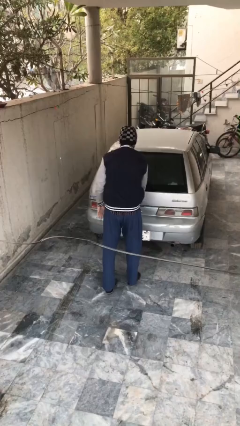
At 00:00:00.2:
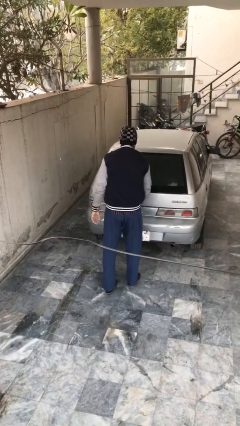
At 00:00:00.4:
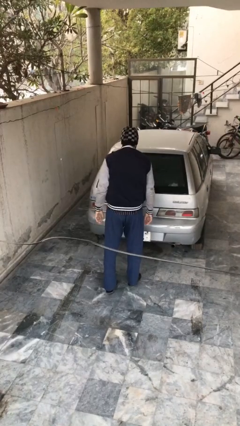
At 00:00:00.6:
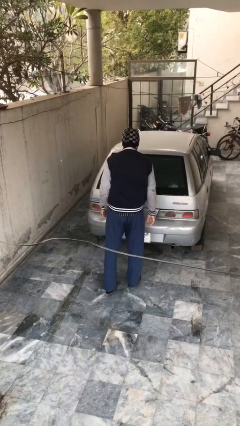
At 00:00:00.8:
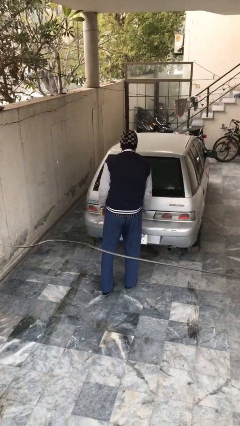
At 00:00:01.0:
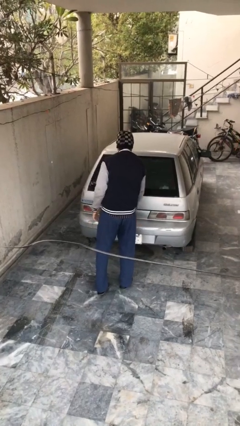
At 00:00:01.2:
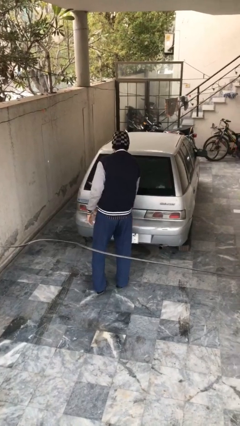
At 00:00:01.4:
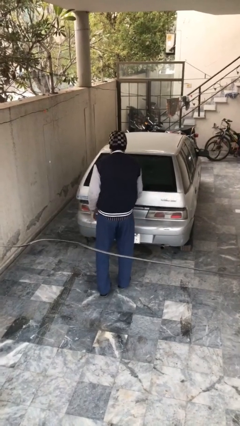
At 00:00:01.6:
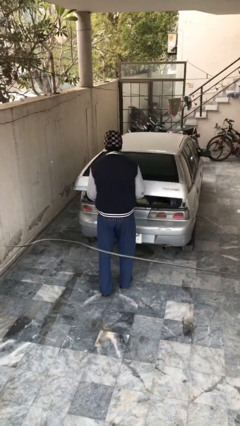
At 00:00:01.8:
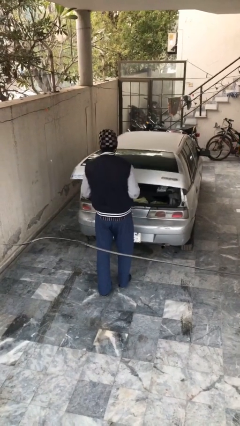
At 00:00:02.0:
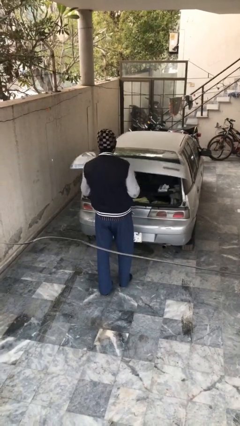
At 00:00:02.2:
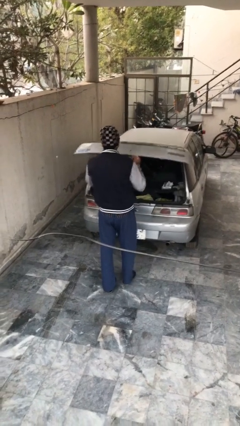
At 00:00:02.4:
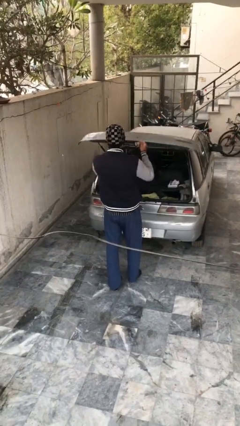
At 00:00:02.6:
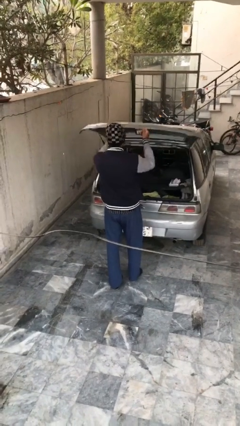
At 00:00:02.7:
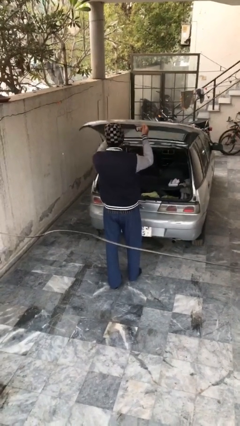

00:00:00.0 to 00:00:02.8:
person opens car trunk

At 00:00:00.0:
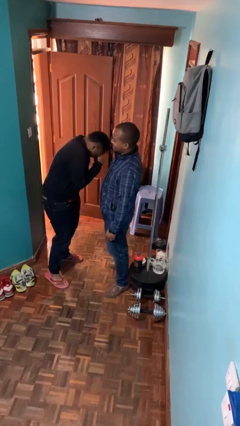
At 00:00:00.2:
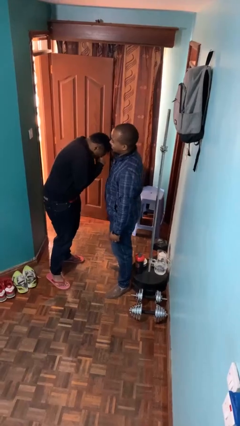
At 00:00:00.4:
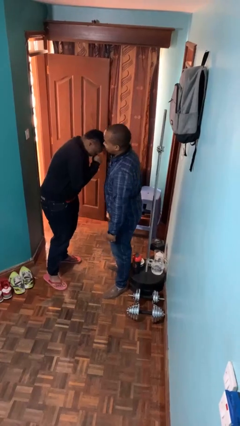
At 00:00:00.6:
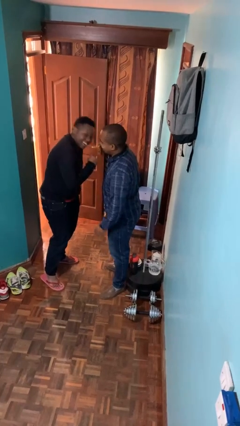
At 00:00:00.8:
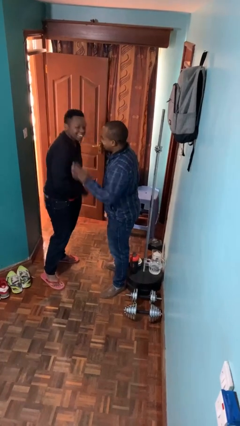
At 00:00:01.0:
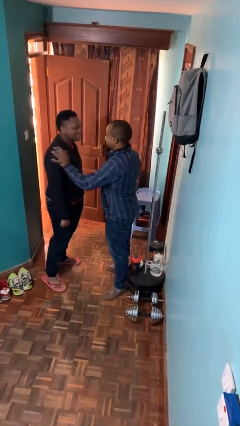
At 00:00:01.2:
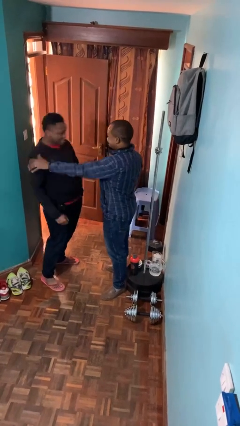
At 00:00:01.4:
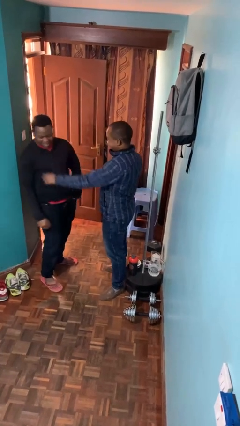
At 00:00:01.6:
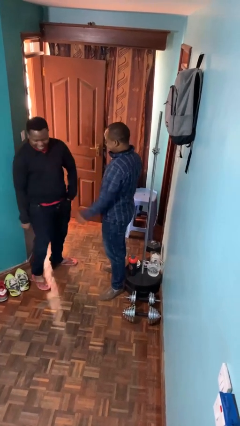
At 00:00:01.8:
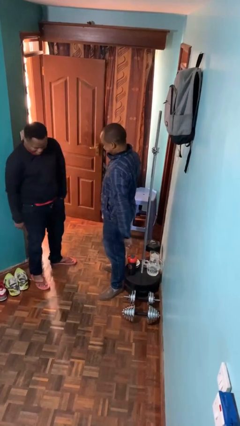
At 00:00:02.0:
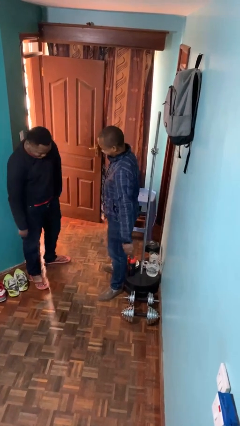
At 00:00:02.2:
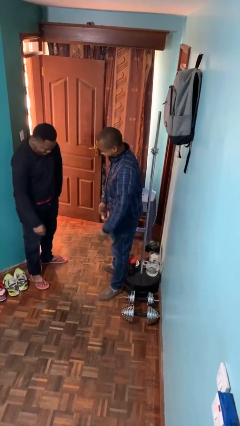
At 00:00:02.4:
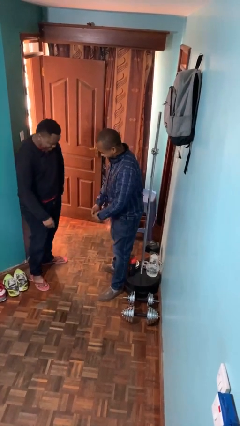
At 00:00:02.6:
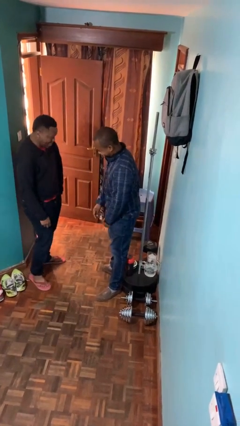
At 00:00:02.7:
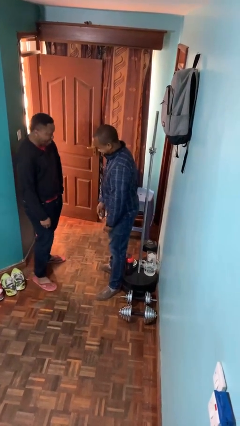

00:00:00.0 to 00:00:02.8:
person shoves person

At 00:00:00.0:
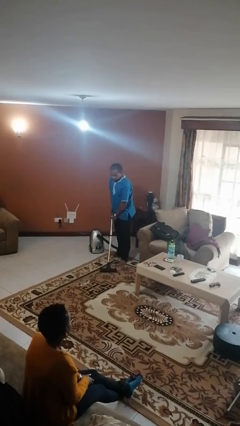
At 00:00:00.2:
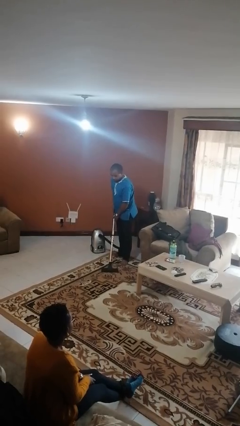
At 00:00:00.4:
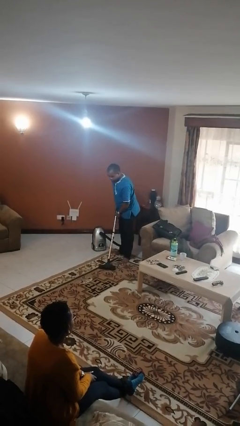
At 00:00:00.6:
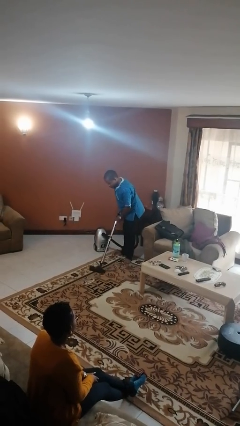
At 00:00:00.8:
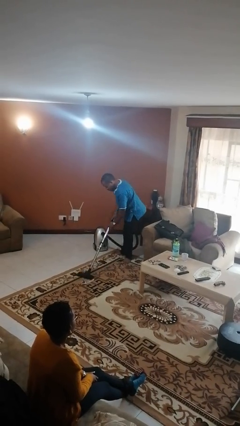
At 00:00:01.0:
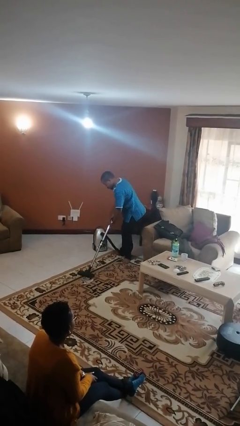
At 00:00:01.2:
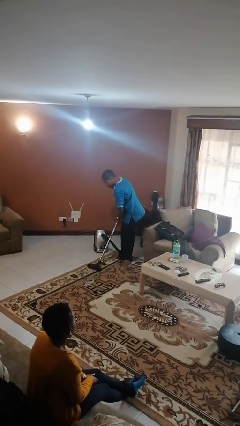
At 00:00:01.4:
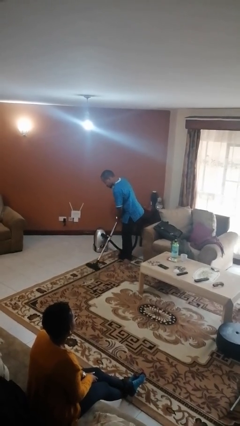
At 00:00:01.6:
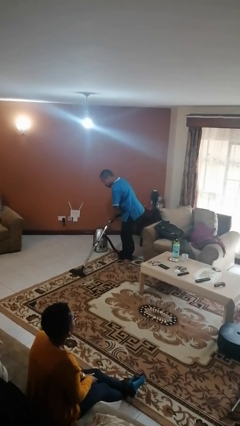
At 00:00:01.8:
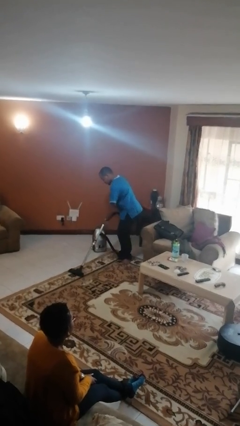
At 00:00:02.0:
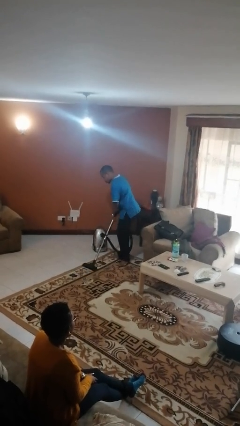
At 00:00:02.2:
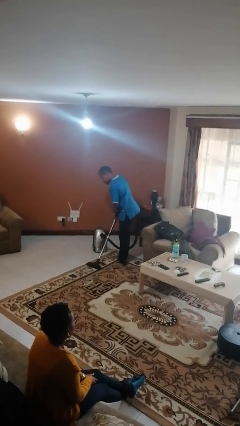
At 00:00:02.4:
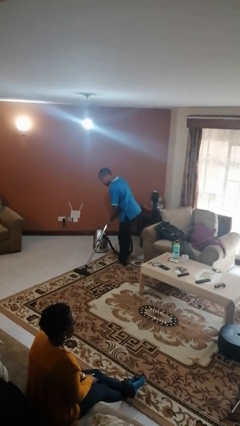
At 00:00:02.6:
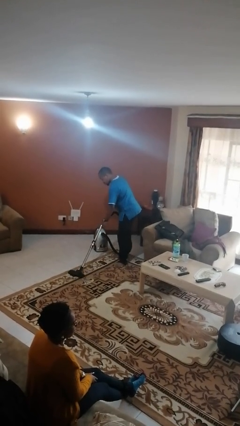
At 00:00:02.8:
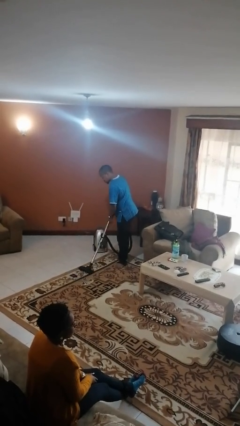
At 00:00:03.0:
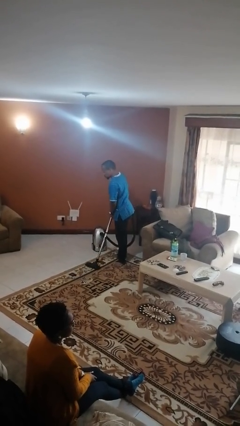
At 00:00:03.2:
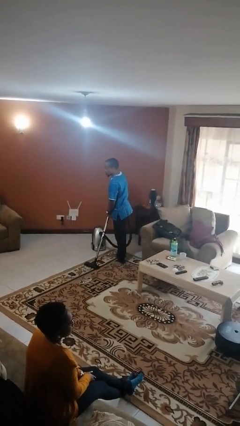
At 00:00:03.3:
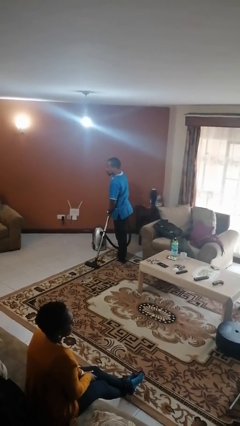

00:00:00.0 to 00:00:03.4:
person vacuums carpet

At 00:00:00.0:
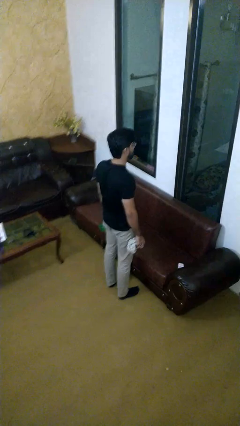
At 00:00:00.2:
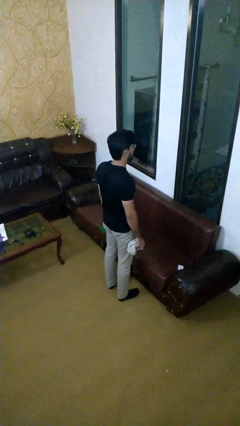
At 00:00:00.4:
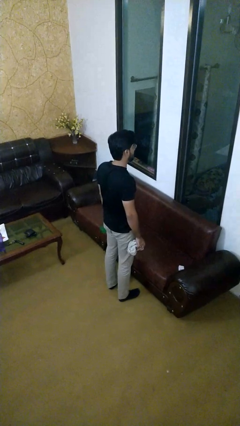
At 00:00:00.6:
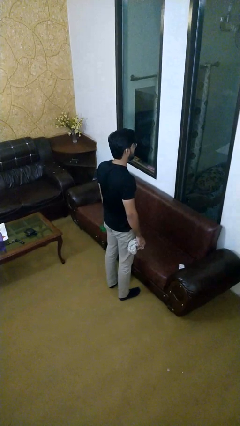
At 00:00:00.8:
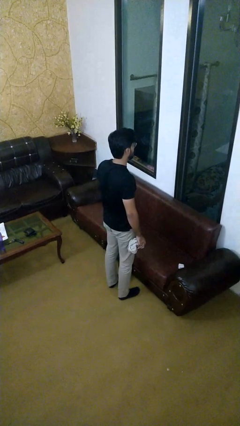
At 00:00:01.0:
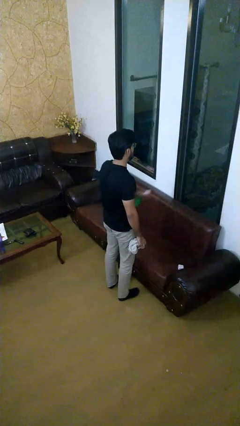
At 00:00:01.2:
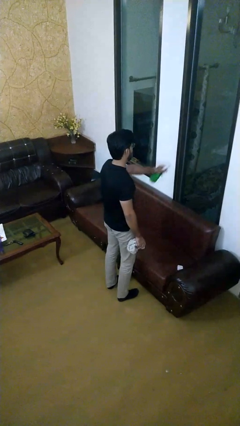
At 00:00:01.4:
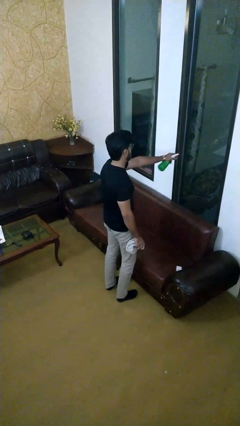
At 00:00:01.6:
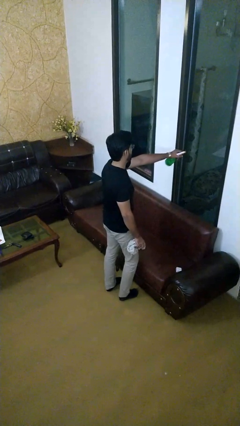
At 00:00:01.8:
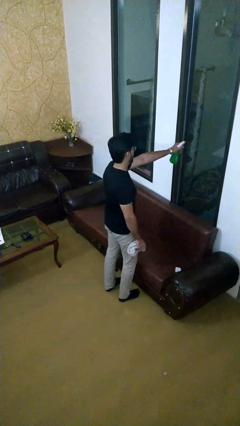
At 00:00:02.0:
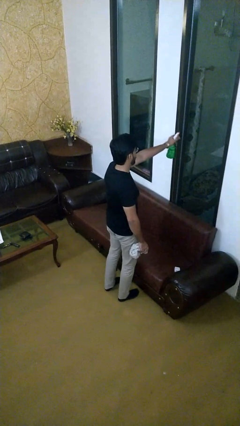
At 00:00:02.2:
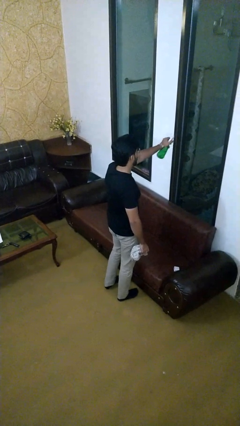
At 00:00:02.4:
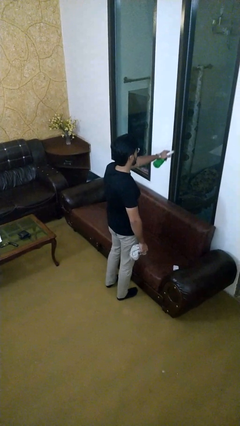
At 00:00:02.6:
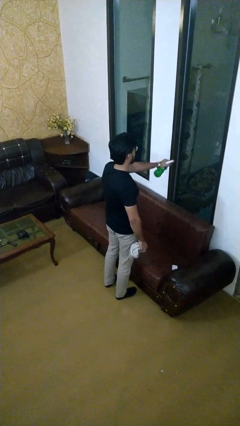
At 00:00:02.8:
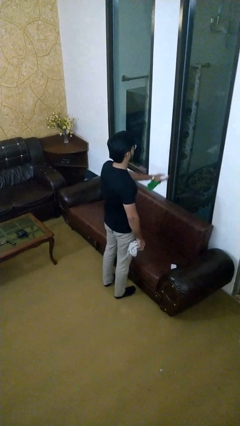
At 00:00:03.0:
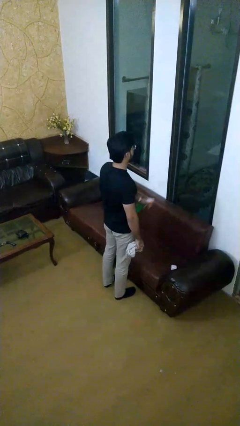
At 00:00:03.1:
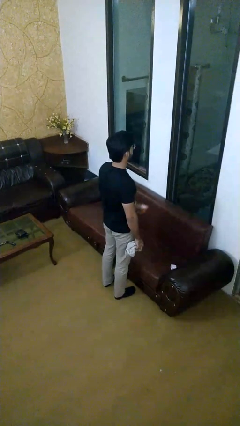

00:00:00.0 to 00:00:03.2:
person sprays from bottle

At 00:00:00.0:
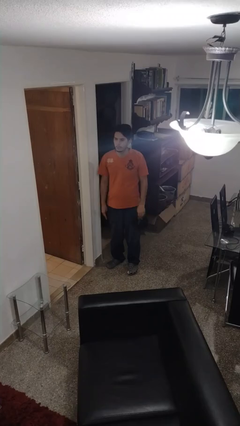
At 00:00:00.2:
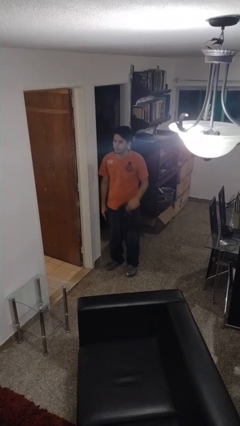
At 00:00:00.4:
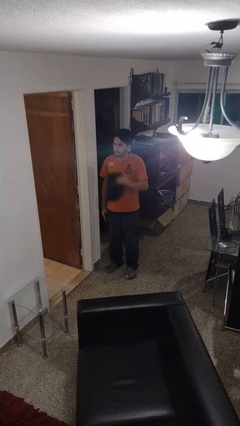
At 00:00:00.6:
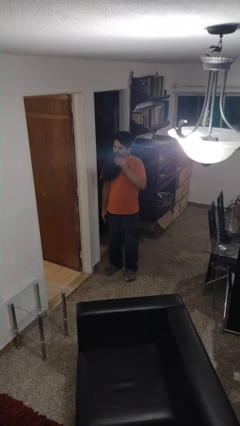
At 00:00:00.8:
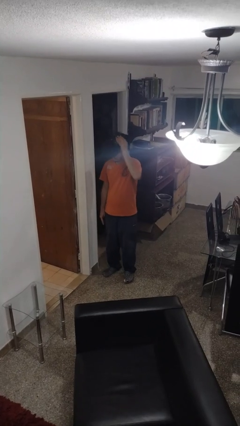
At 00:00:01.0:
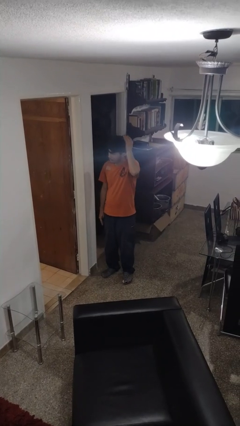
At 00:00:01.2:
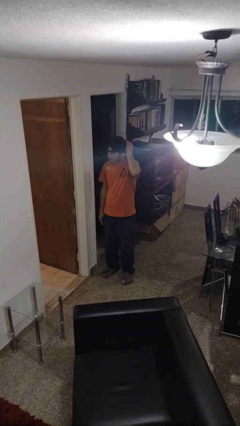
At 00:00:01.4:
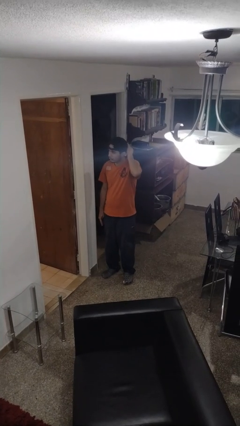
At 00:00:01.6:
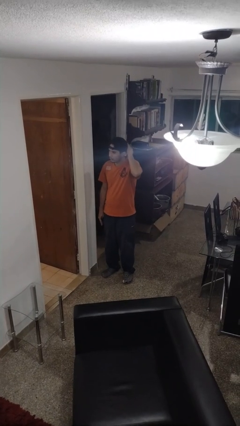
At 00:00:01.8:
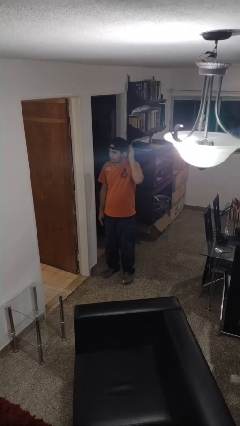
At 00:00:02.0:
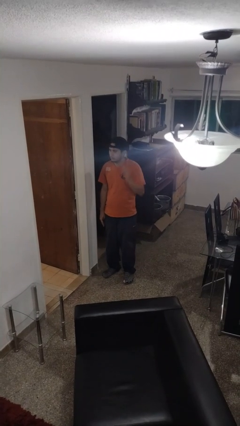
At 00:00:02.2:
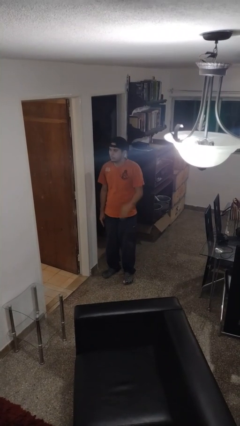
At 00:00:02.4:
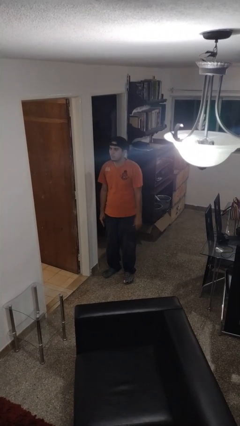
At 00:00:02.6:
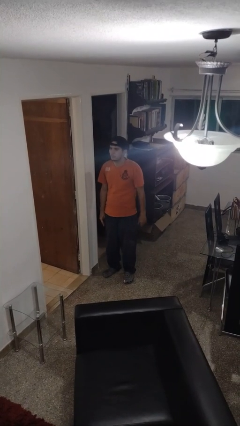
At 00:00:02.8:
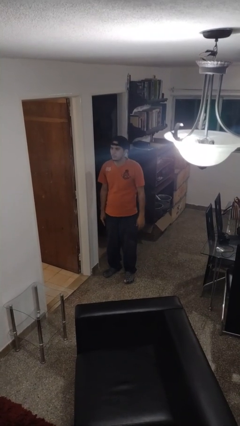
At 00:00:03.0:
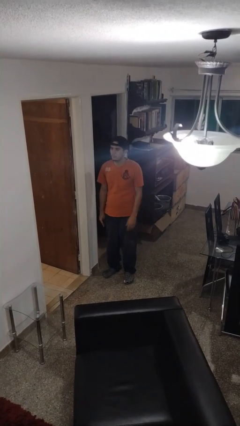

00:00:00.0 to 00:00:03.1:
person puts on hat

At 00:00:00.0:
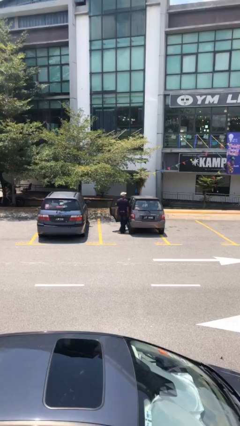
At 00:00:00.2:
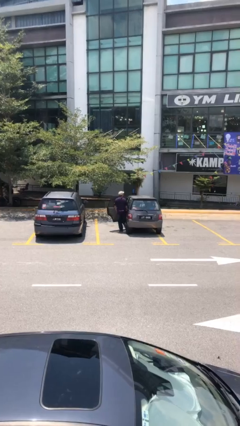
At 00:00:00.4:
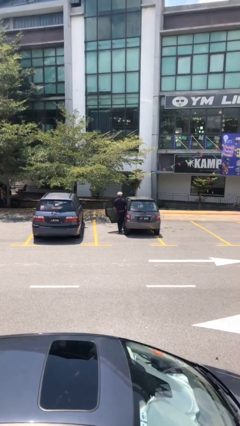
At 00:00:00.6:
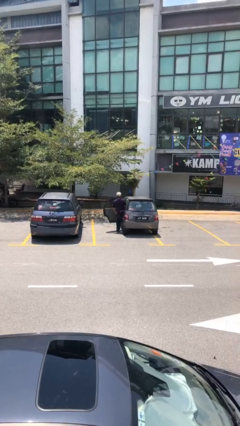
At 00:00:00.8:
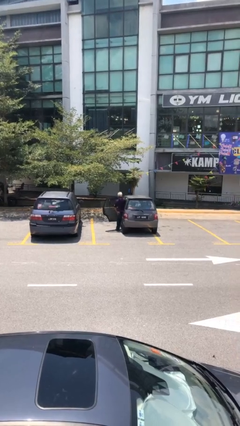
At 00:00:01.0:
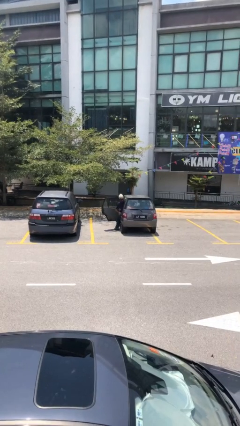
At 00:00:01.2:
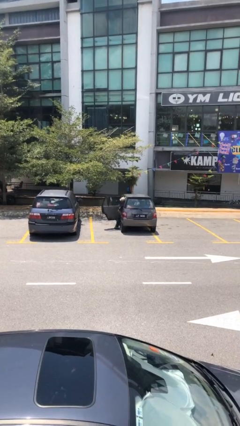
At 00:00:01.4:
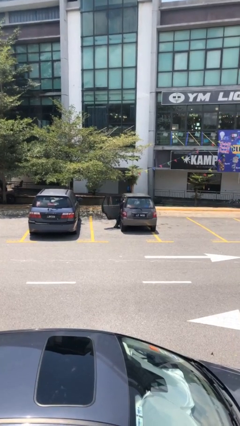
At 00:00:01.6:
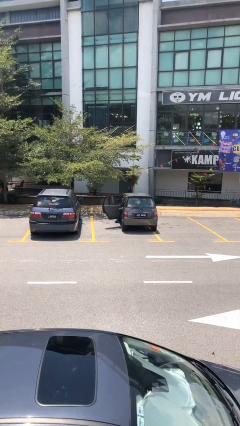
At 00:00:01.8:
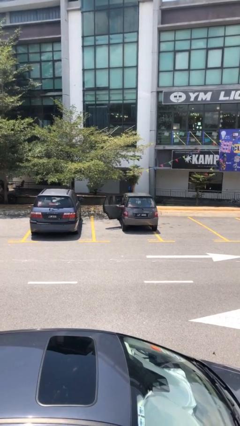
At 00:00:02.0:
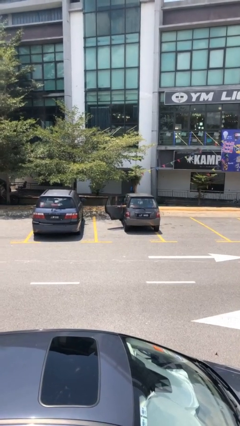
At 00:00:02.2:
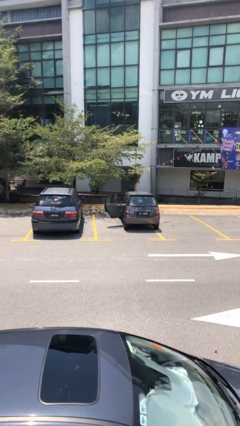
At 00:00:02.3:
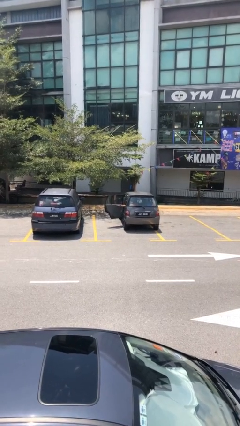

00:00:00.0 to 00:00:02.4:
person enters car
